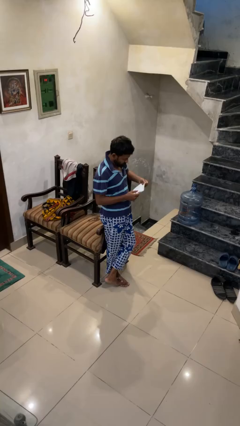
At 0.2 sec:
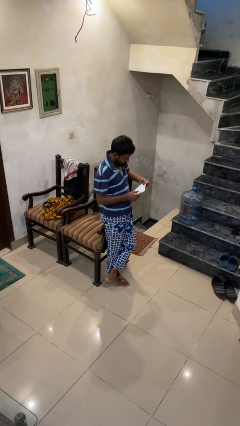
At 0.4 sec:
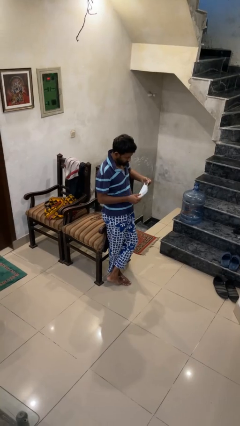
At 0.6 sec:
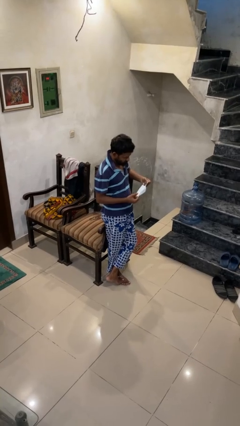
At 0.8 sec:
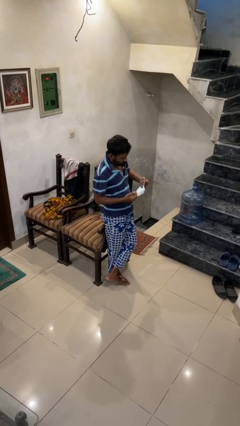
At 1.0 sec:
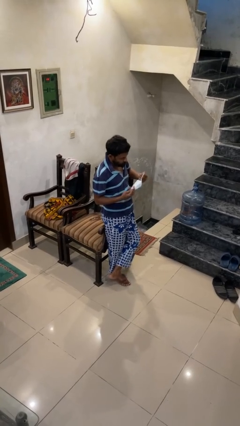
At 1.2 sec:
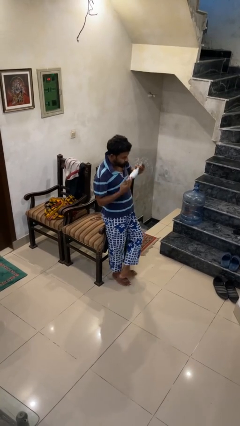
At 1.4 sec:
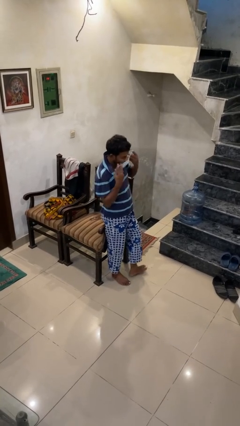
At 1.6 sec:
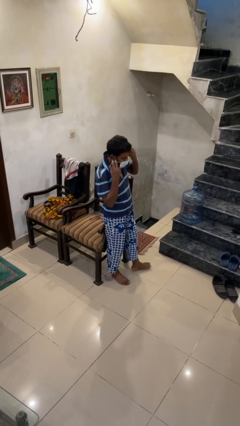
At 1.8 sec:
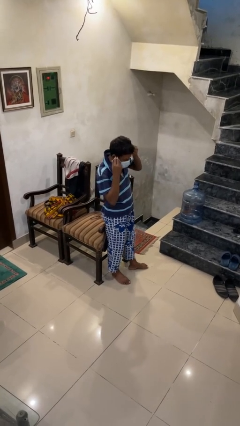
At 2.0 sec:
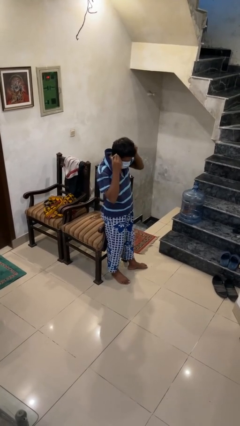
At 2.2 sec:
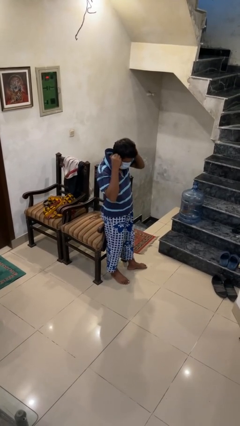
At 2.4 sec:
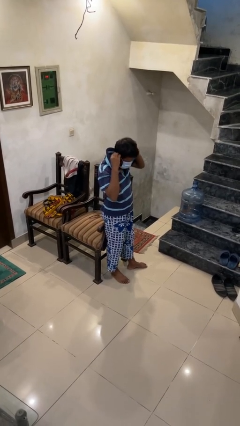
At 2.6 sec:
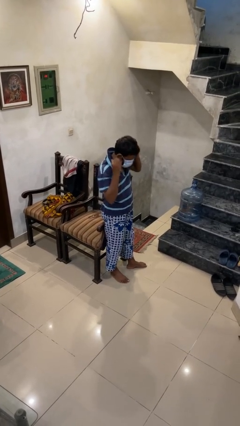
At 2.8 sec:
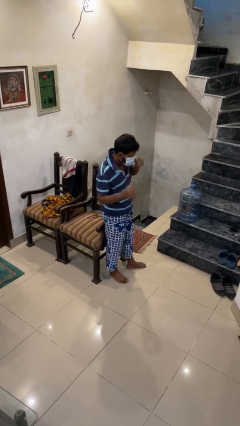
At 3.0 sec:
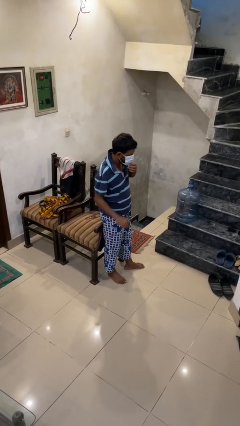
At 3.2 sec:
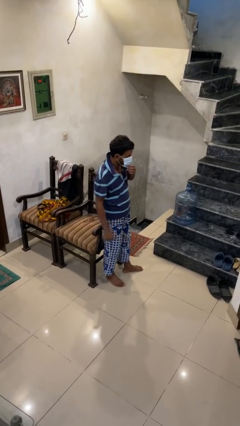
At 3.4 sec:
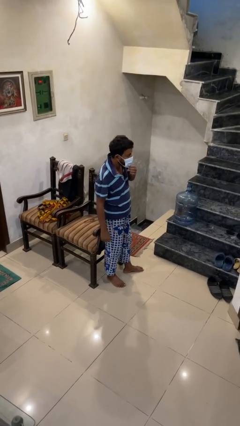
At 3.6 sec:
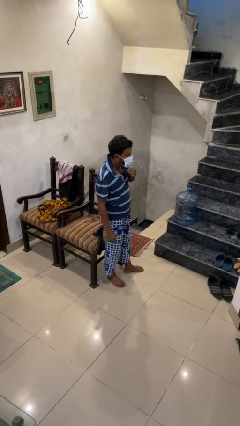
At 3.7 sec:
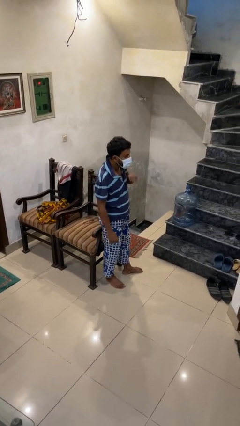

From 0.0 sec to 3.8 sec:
person puts on facemask

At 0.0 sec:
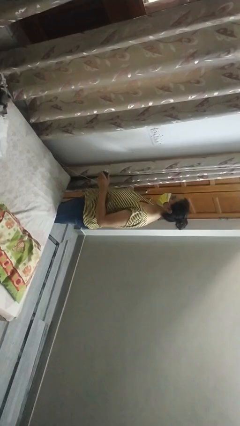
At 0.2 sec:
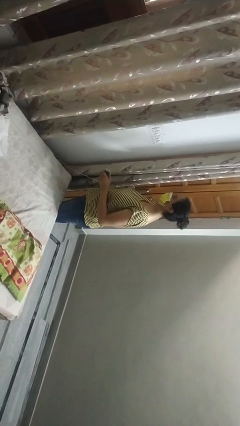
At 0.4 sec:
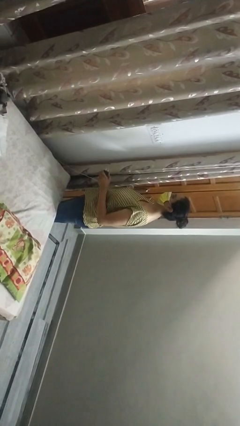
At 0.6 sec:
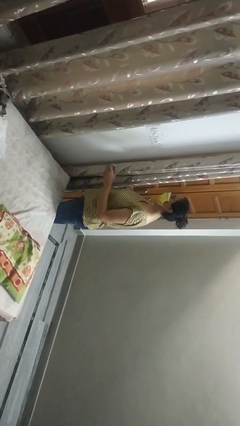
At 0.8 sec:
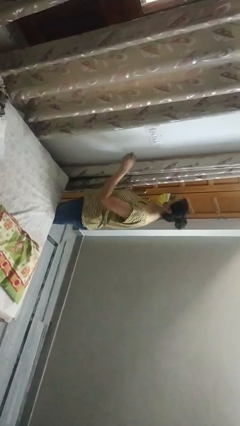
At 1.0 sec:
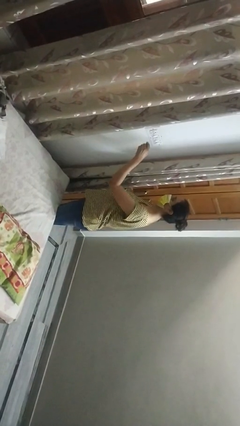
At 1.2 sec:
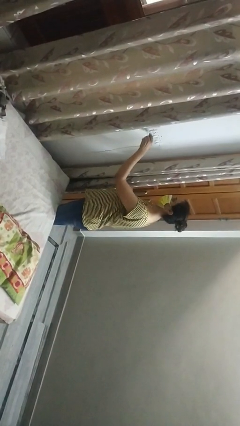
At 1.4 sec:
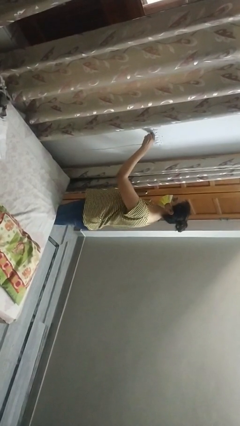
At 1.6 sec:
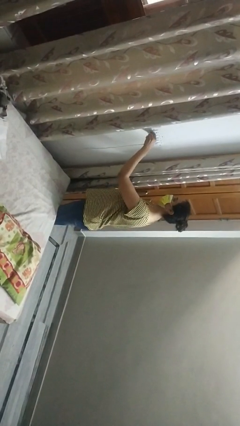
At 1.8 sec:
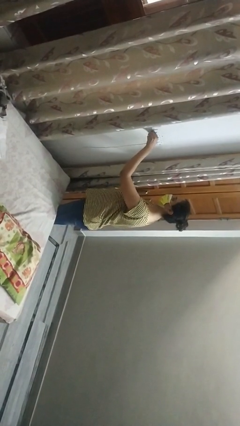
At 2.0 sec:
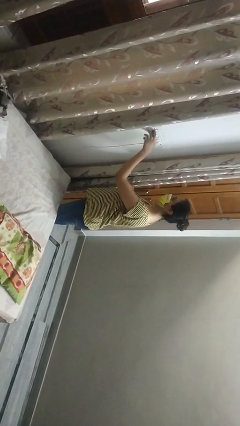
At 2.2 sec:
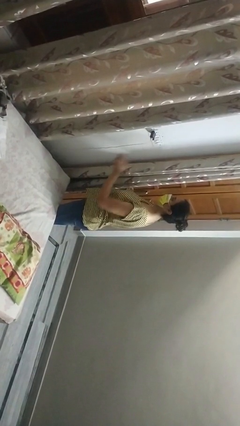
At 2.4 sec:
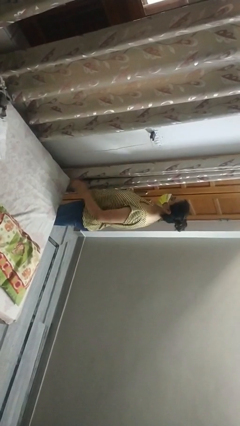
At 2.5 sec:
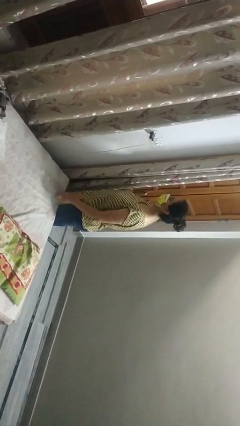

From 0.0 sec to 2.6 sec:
person plugs into electrical socket

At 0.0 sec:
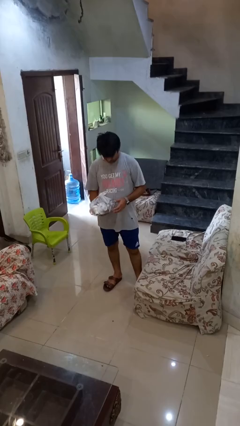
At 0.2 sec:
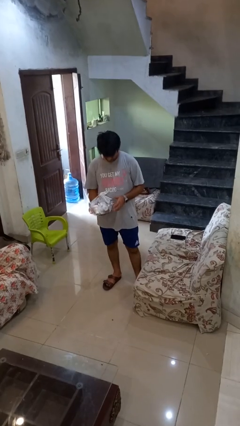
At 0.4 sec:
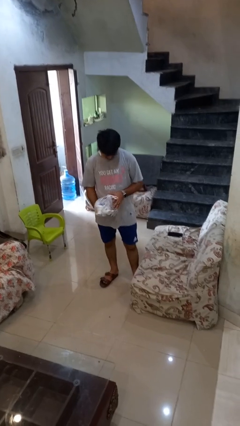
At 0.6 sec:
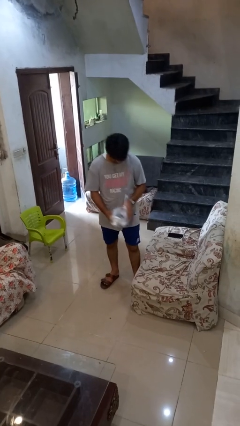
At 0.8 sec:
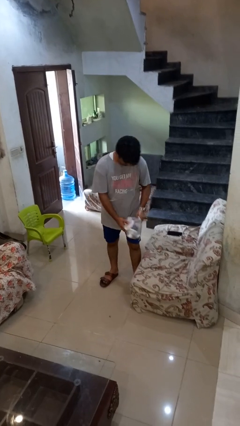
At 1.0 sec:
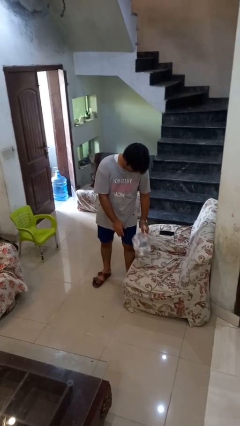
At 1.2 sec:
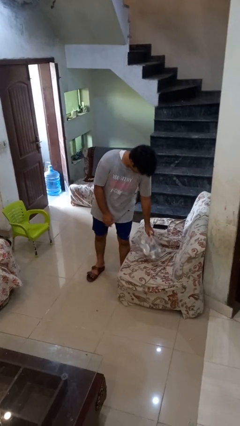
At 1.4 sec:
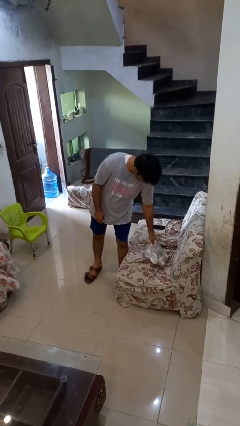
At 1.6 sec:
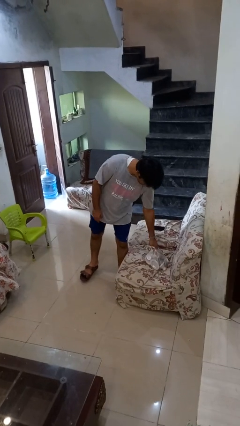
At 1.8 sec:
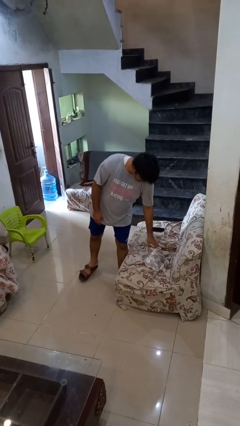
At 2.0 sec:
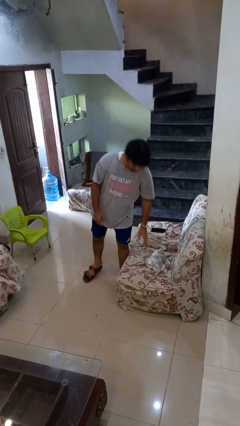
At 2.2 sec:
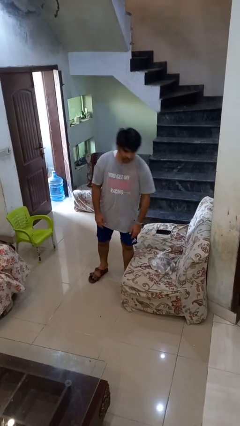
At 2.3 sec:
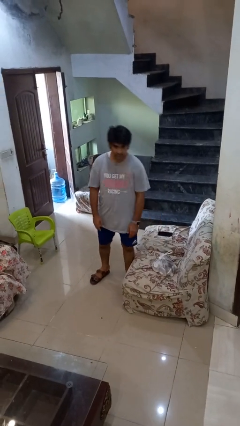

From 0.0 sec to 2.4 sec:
person puts down object on couch

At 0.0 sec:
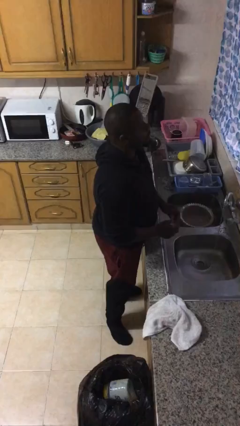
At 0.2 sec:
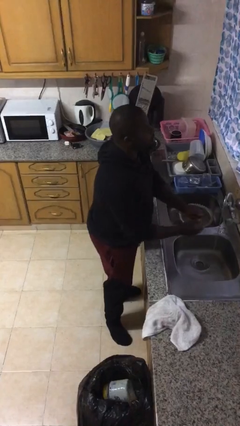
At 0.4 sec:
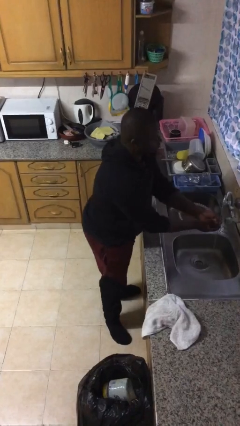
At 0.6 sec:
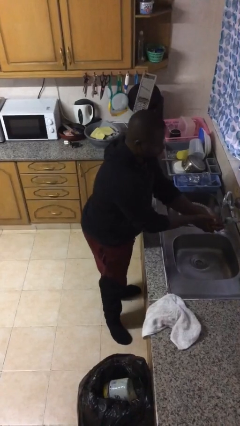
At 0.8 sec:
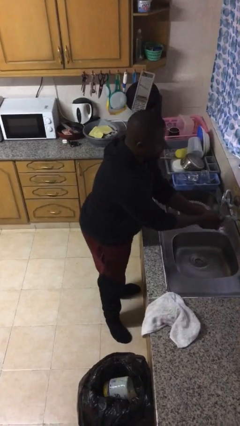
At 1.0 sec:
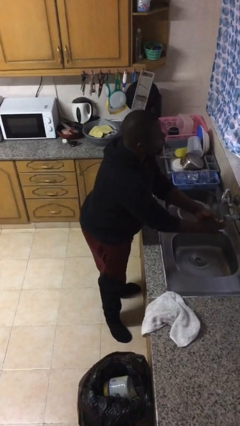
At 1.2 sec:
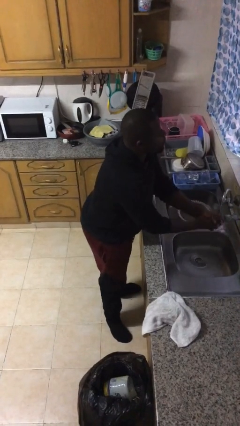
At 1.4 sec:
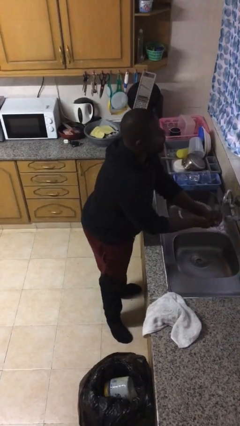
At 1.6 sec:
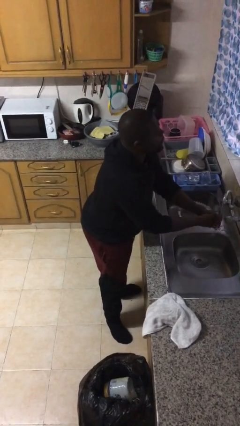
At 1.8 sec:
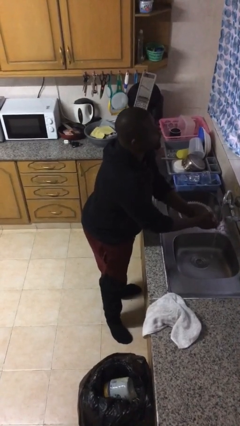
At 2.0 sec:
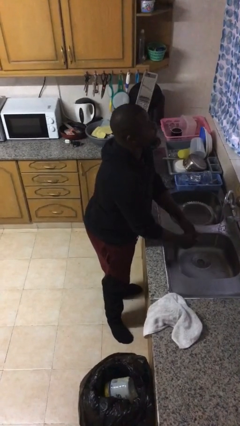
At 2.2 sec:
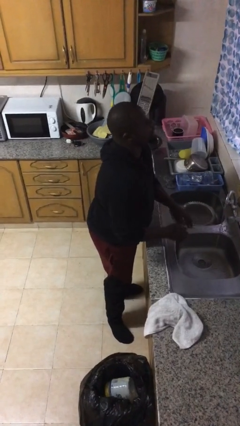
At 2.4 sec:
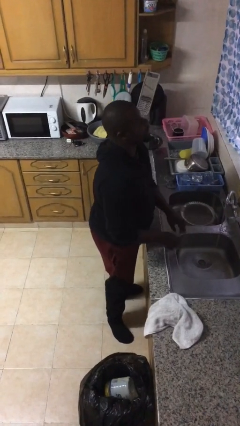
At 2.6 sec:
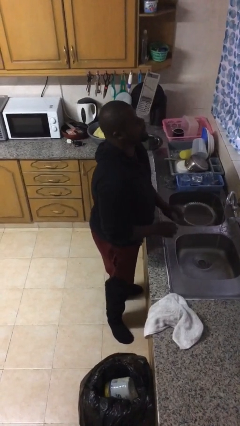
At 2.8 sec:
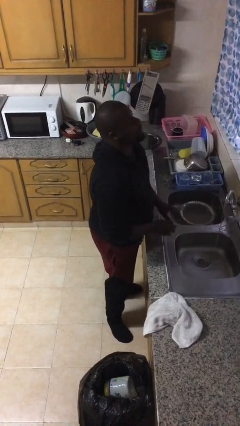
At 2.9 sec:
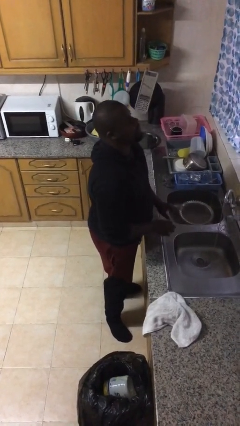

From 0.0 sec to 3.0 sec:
person washes hands

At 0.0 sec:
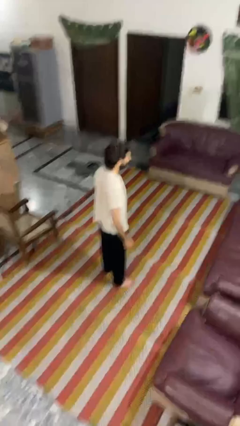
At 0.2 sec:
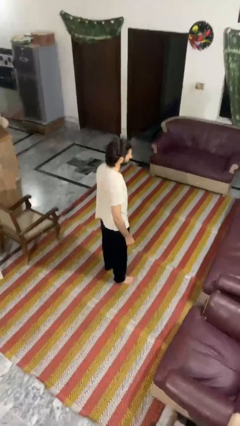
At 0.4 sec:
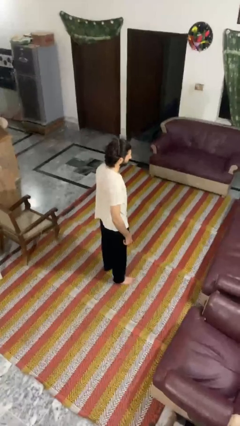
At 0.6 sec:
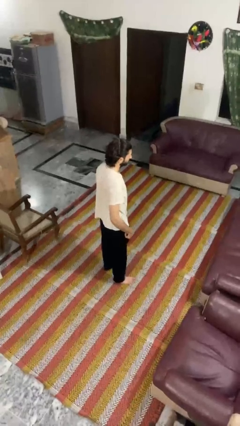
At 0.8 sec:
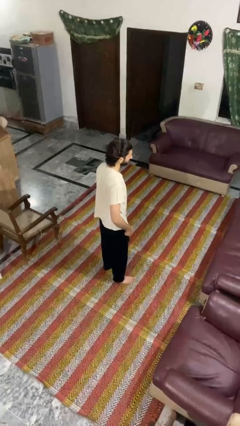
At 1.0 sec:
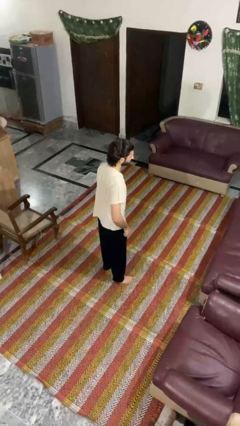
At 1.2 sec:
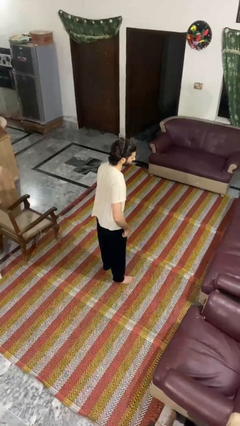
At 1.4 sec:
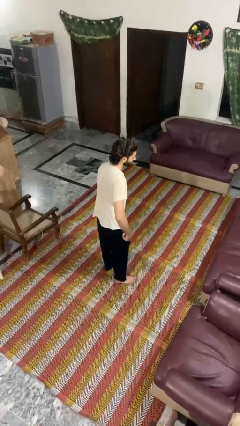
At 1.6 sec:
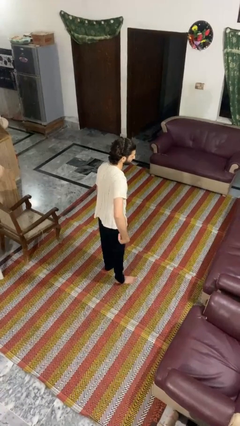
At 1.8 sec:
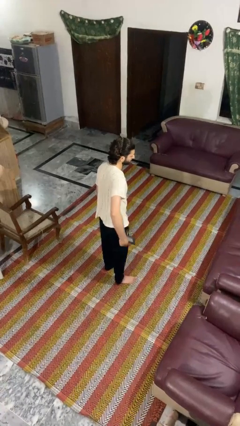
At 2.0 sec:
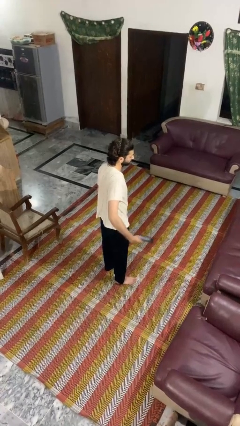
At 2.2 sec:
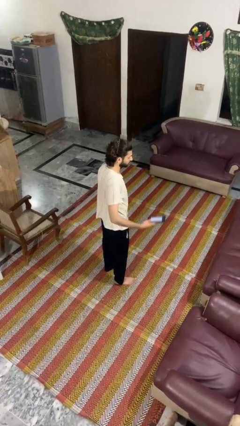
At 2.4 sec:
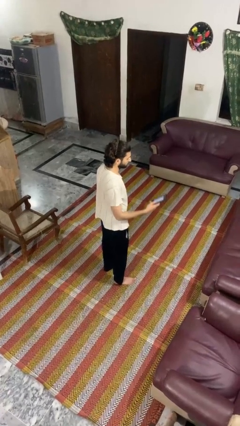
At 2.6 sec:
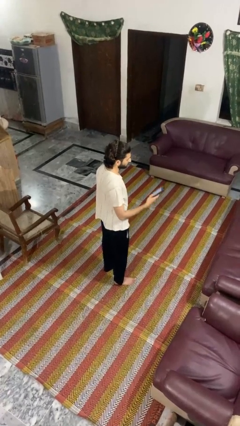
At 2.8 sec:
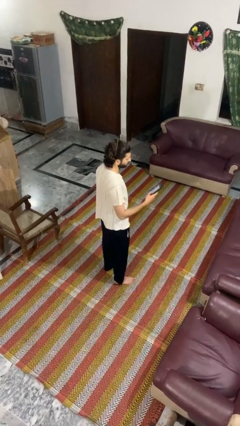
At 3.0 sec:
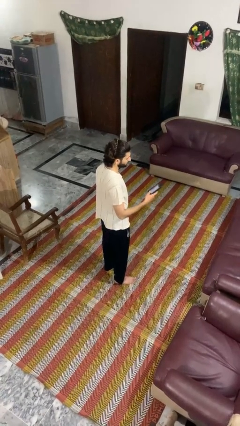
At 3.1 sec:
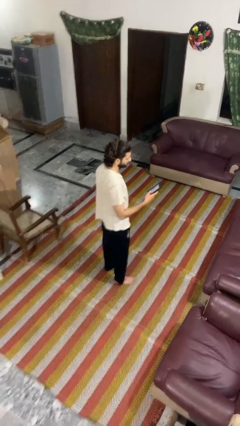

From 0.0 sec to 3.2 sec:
person takes phone from pocket

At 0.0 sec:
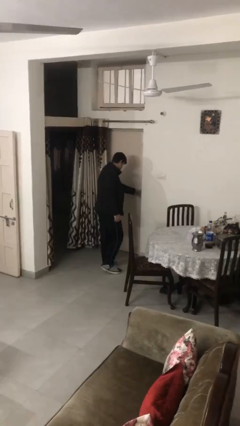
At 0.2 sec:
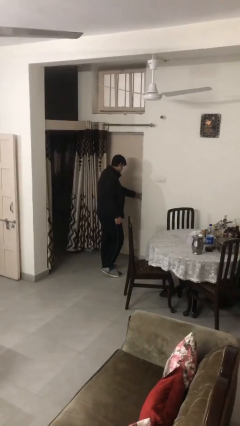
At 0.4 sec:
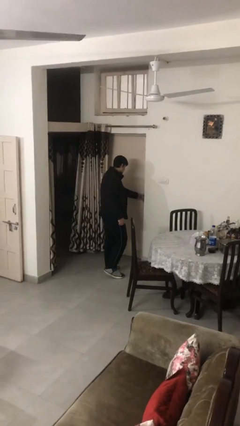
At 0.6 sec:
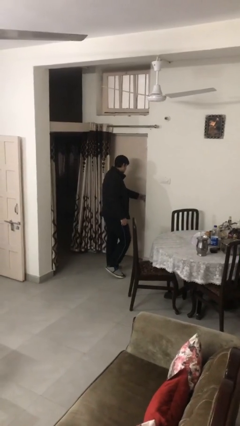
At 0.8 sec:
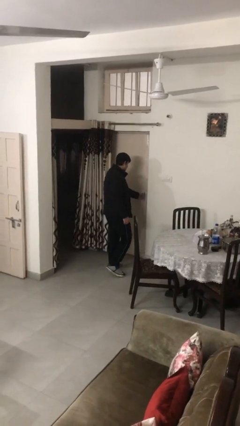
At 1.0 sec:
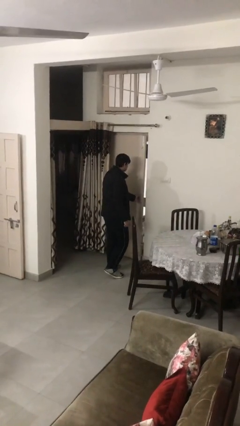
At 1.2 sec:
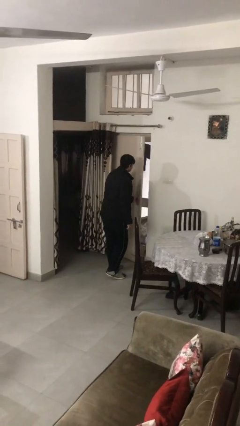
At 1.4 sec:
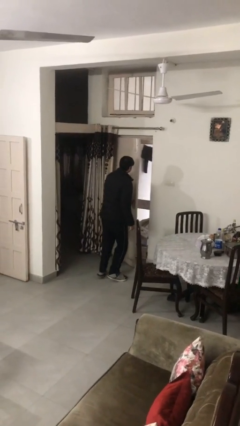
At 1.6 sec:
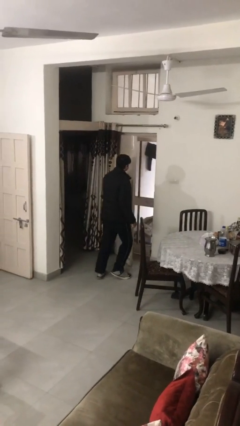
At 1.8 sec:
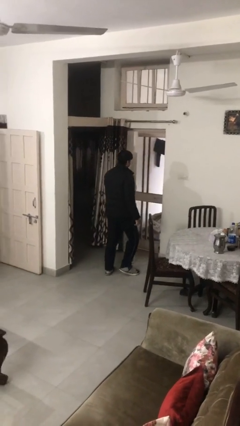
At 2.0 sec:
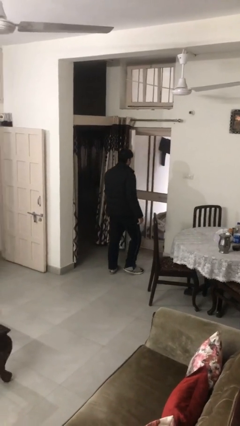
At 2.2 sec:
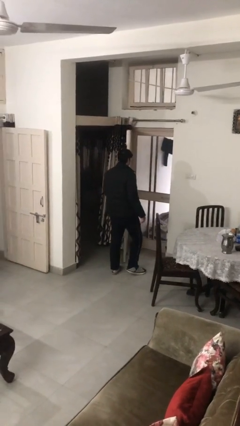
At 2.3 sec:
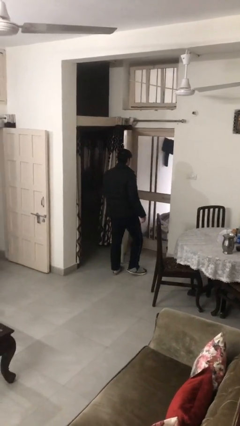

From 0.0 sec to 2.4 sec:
person opens facility door
